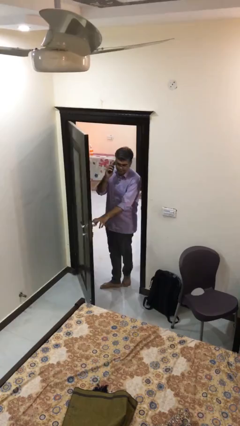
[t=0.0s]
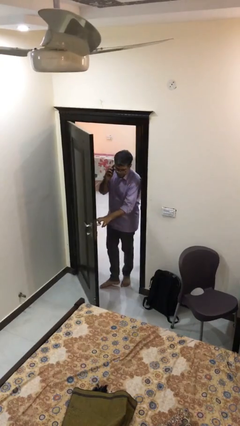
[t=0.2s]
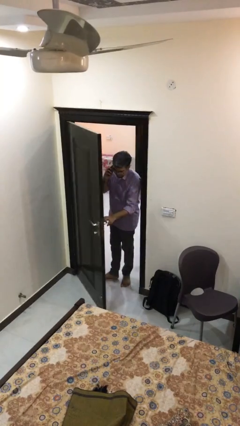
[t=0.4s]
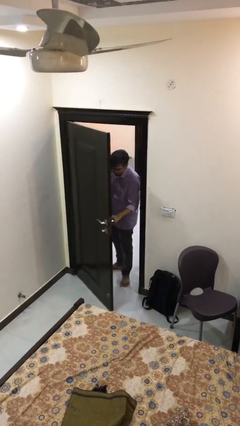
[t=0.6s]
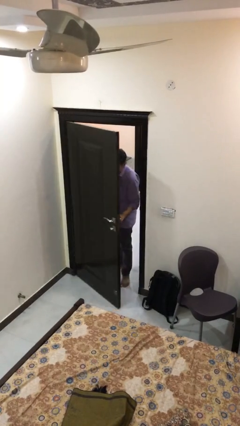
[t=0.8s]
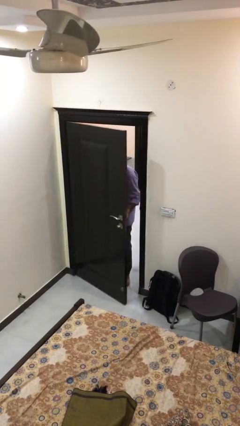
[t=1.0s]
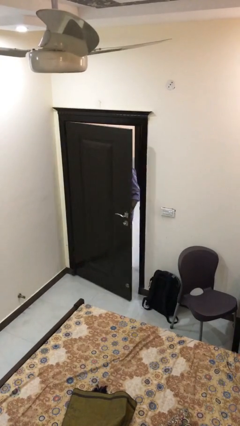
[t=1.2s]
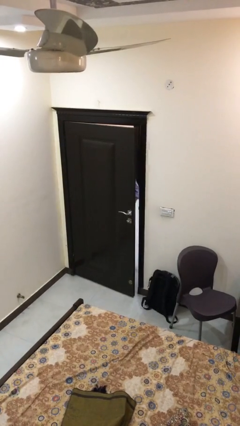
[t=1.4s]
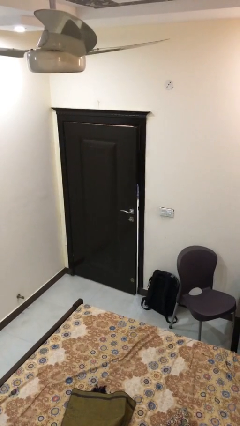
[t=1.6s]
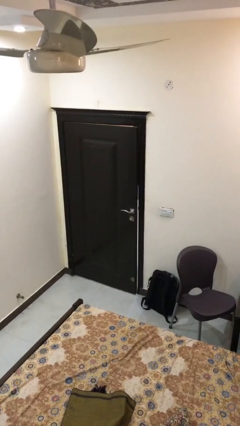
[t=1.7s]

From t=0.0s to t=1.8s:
person closes facility door

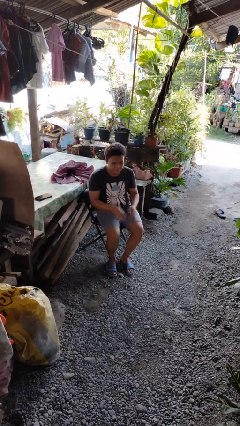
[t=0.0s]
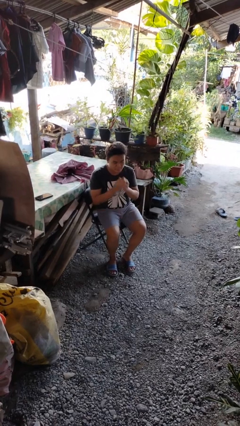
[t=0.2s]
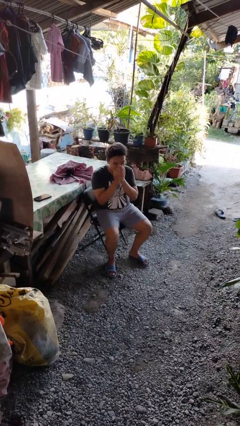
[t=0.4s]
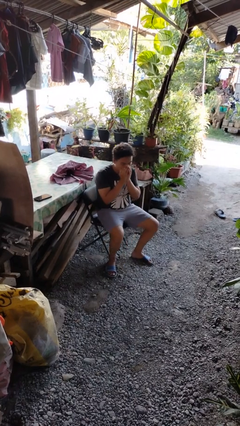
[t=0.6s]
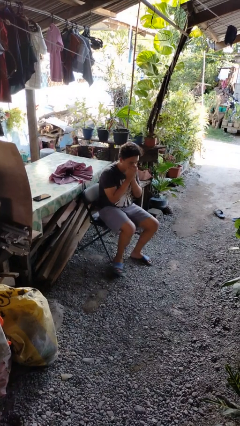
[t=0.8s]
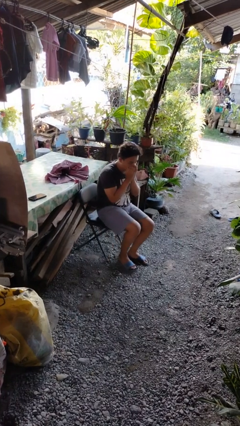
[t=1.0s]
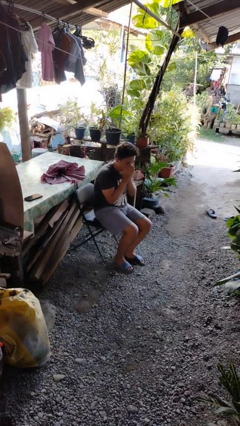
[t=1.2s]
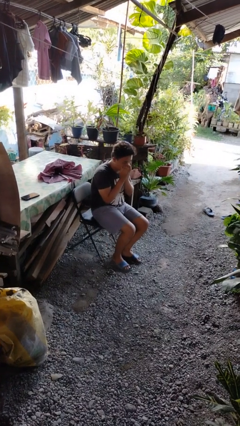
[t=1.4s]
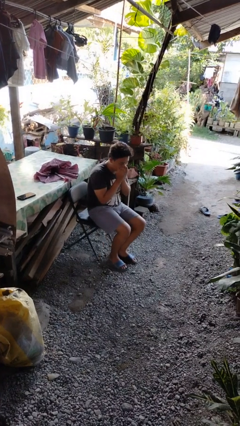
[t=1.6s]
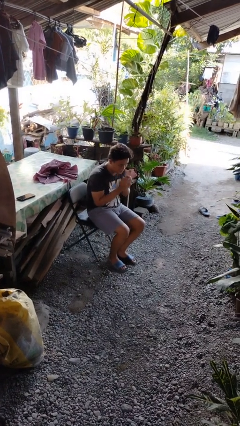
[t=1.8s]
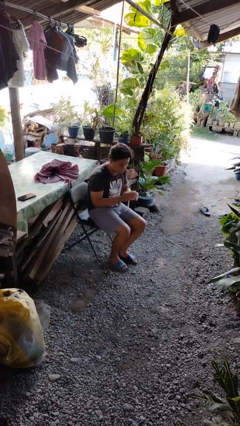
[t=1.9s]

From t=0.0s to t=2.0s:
person blows into hands

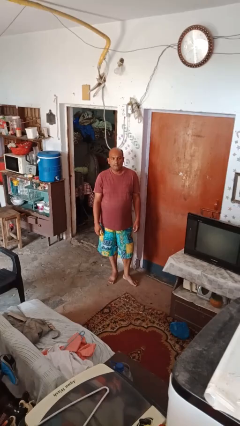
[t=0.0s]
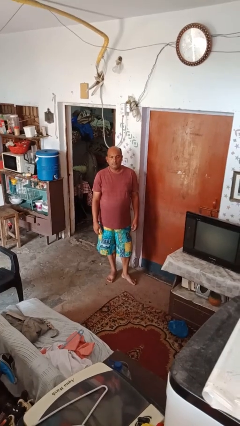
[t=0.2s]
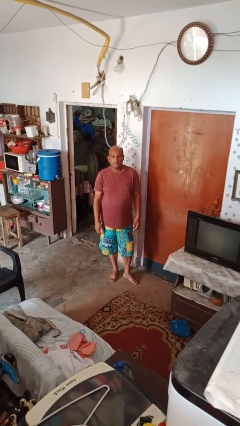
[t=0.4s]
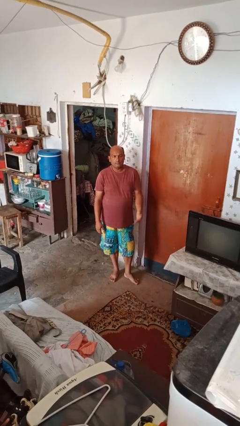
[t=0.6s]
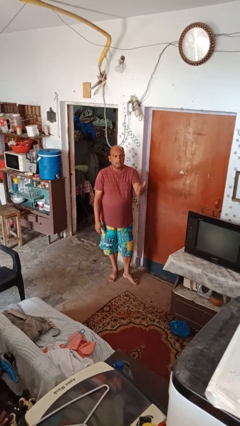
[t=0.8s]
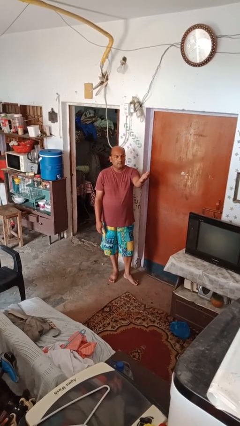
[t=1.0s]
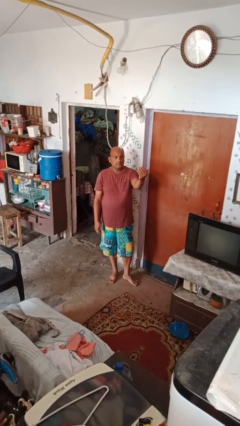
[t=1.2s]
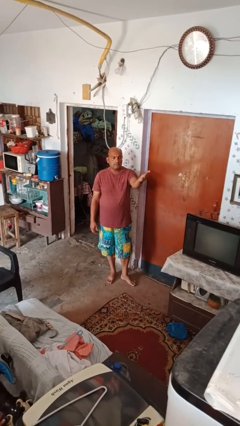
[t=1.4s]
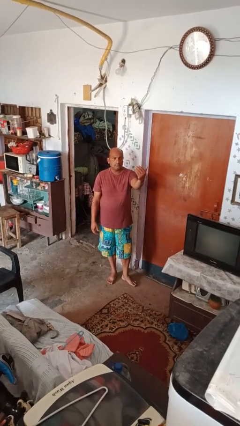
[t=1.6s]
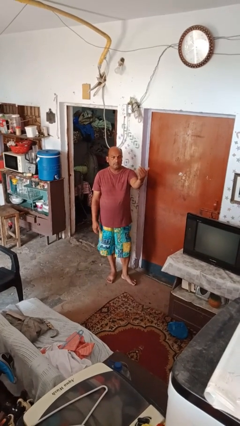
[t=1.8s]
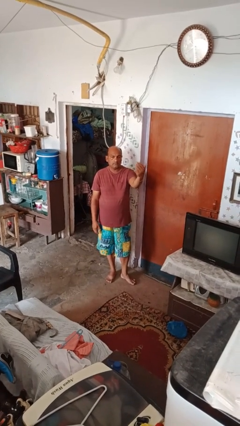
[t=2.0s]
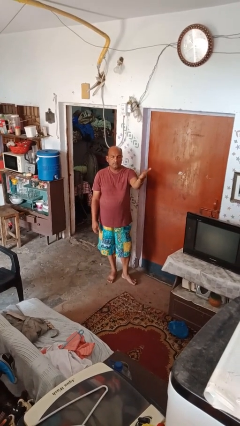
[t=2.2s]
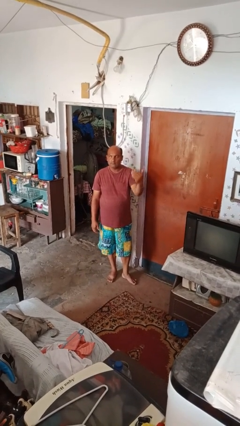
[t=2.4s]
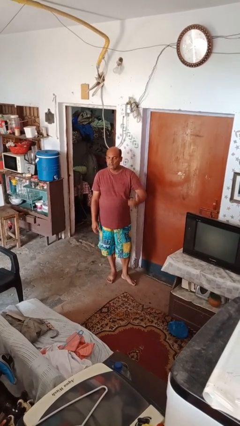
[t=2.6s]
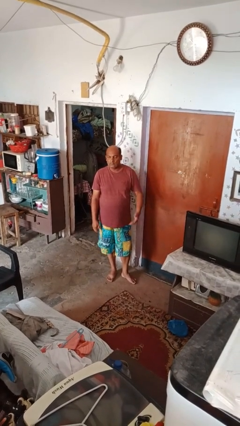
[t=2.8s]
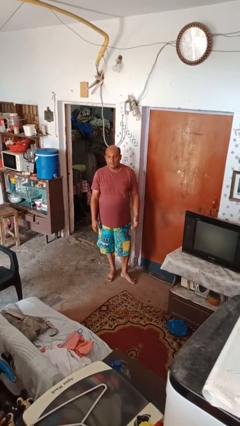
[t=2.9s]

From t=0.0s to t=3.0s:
person gestures come here

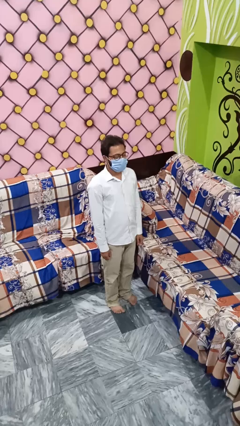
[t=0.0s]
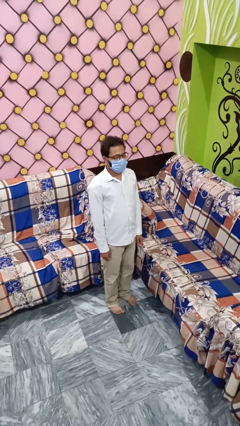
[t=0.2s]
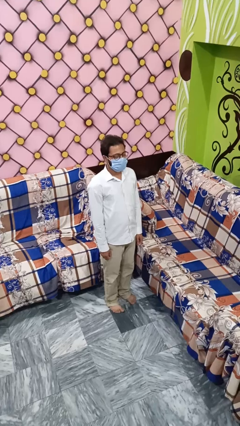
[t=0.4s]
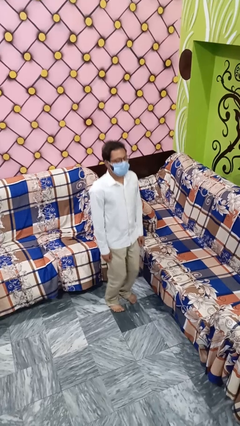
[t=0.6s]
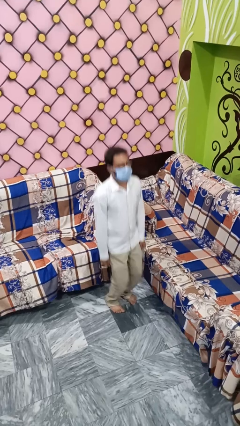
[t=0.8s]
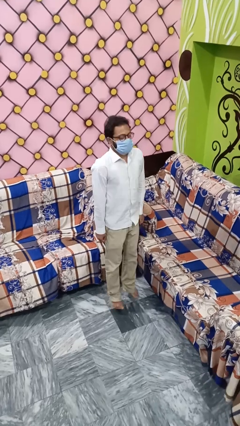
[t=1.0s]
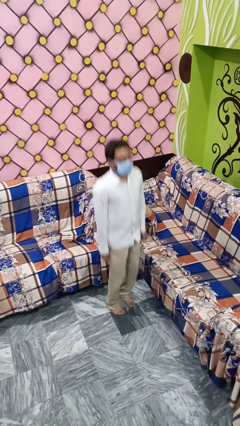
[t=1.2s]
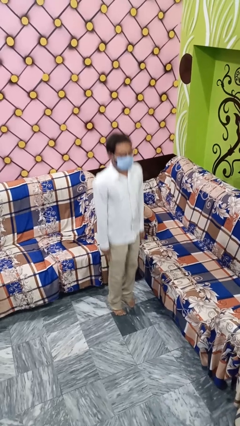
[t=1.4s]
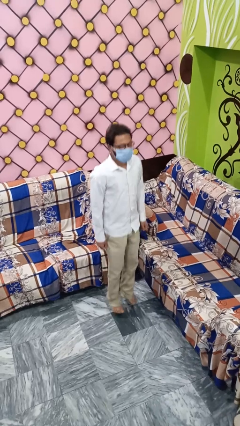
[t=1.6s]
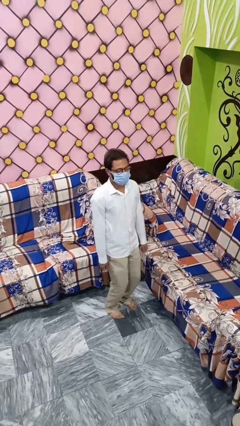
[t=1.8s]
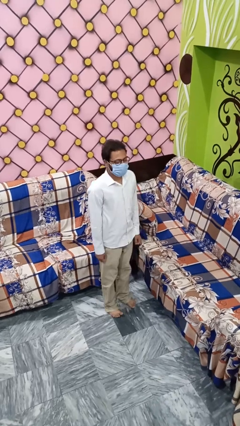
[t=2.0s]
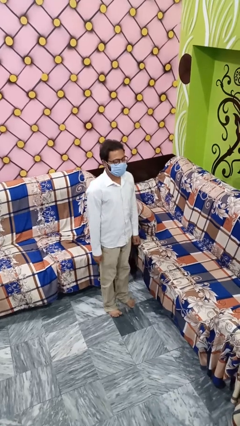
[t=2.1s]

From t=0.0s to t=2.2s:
person jumps

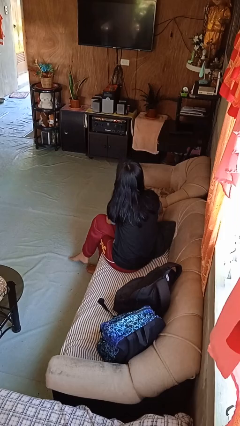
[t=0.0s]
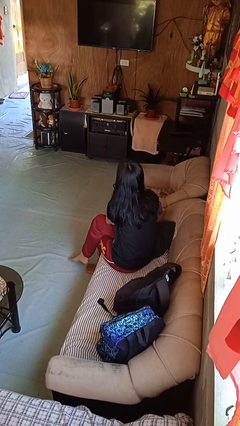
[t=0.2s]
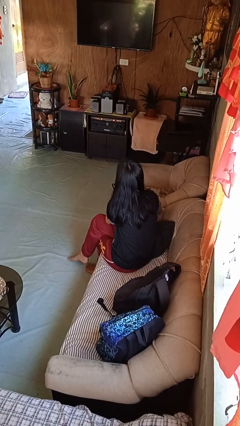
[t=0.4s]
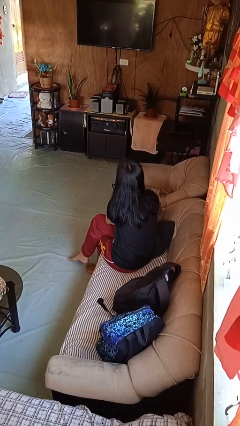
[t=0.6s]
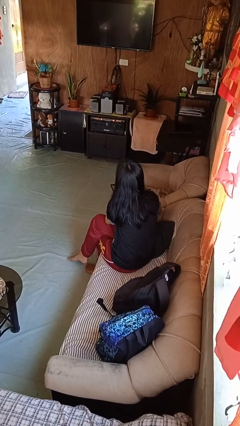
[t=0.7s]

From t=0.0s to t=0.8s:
person uses television remote

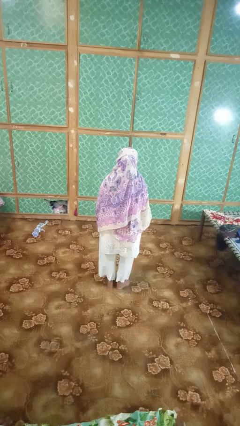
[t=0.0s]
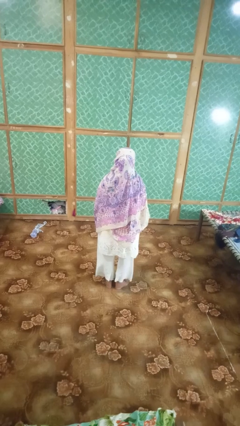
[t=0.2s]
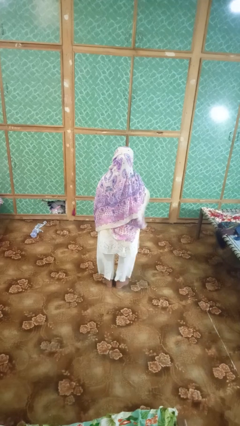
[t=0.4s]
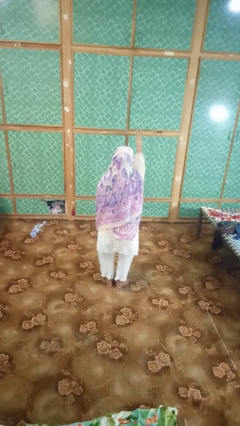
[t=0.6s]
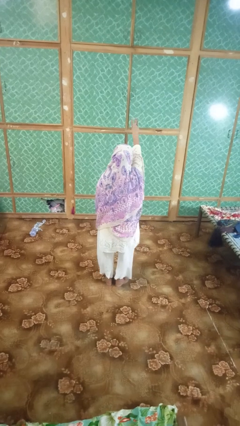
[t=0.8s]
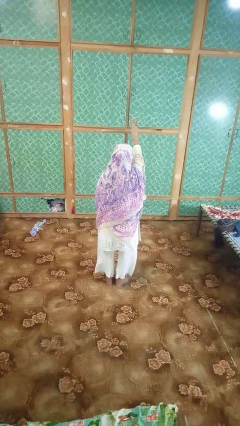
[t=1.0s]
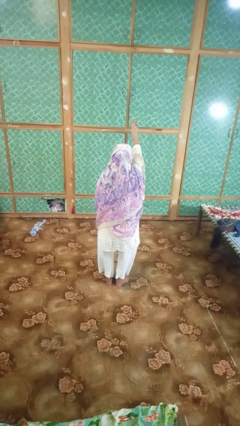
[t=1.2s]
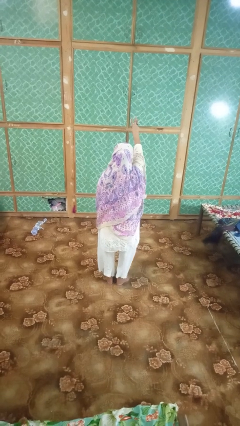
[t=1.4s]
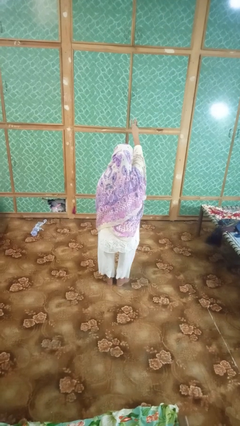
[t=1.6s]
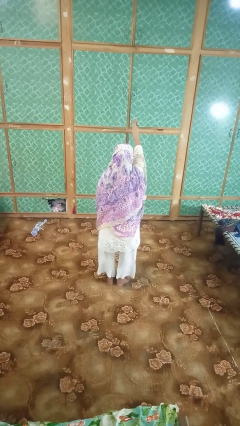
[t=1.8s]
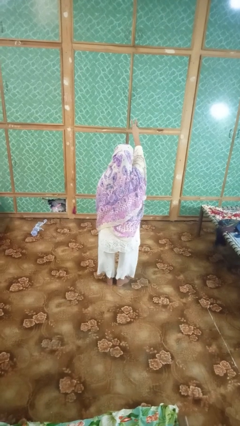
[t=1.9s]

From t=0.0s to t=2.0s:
person gestures number three

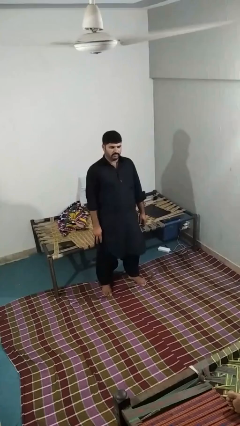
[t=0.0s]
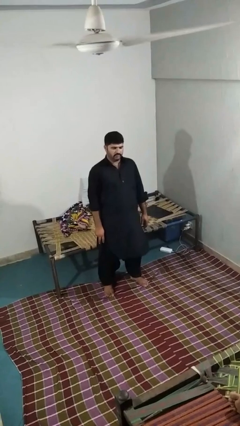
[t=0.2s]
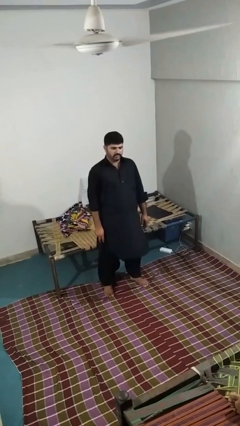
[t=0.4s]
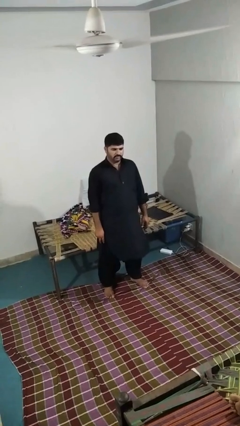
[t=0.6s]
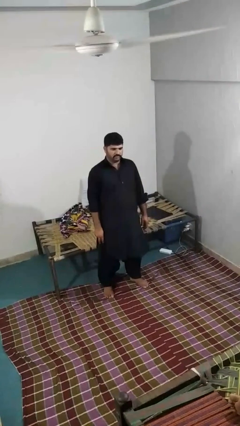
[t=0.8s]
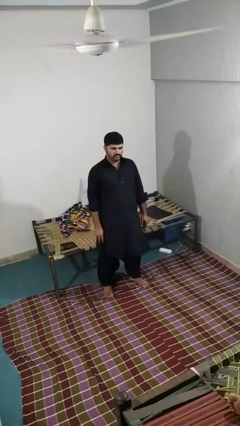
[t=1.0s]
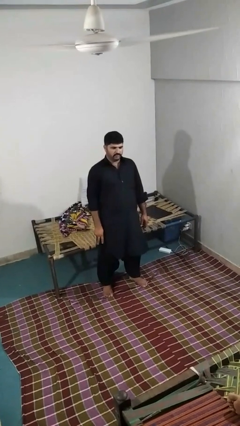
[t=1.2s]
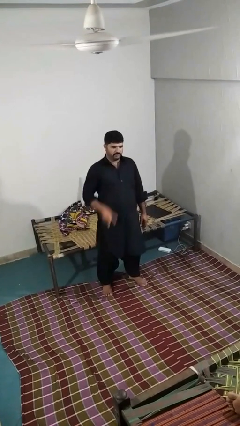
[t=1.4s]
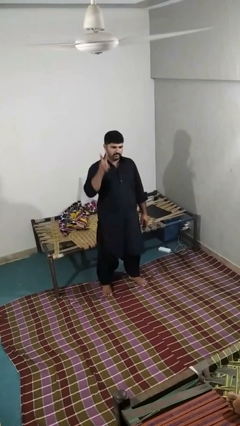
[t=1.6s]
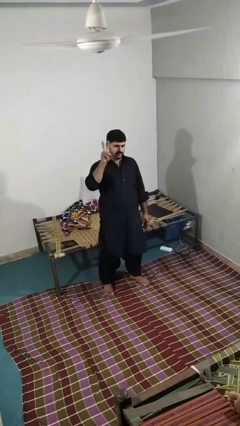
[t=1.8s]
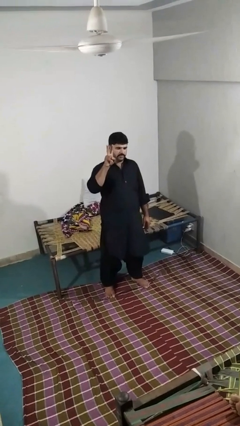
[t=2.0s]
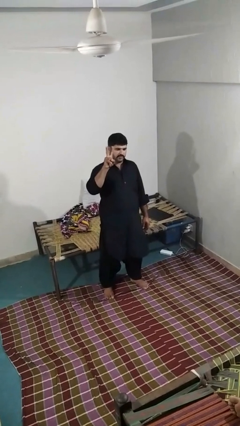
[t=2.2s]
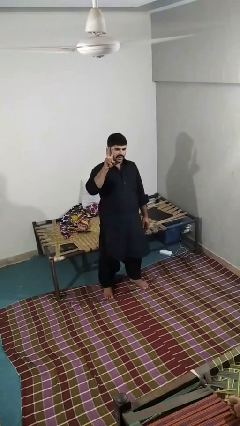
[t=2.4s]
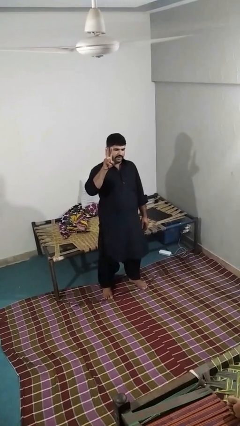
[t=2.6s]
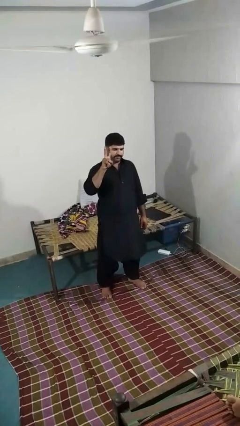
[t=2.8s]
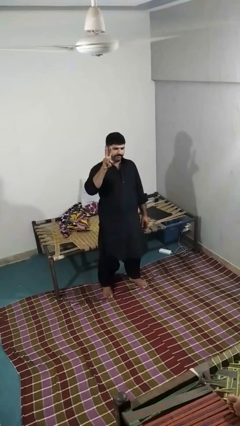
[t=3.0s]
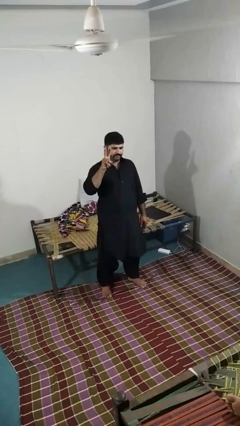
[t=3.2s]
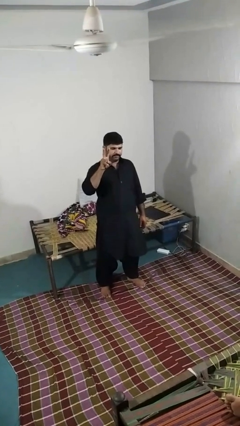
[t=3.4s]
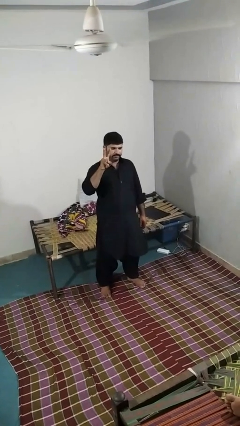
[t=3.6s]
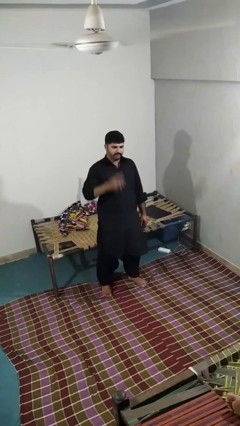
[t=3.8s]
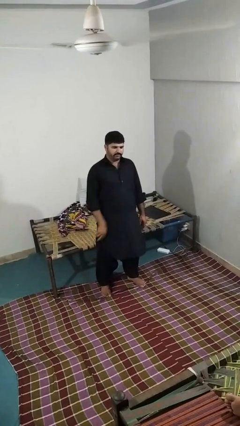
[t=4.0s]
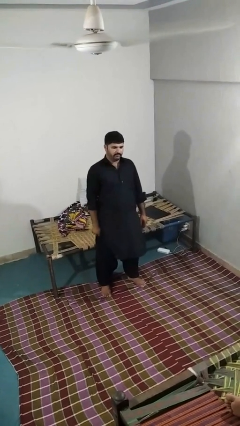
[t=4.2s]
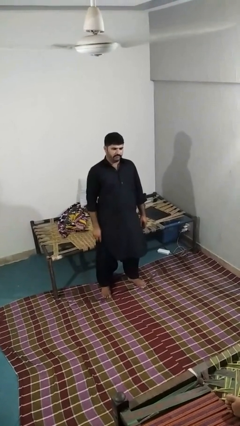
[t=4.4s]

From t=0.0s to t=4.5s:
person gestures peace

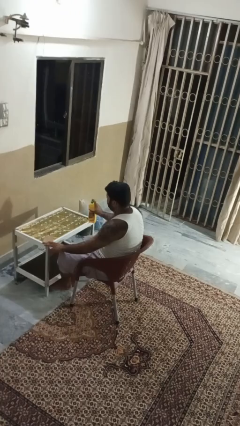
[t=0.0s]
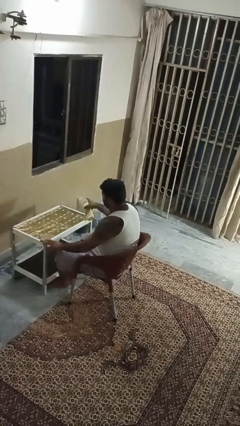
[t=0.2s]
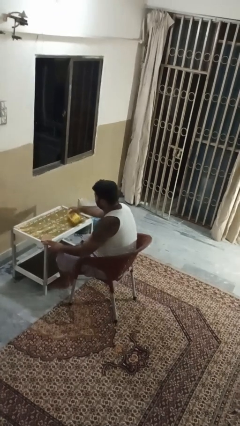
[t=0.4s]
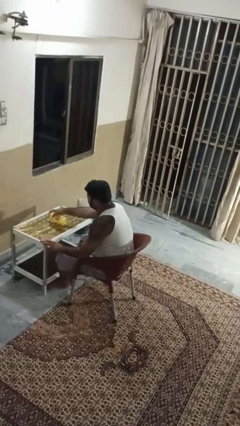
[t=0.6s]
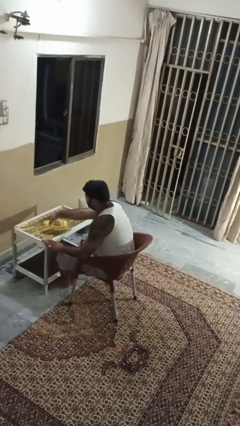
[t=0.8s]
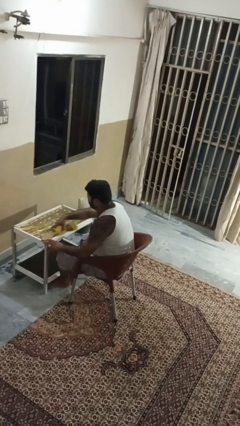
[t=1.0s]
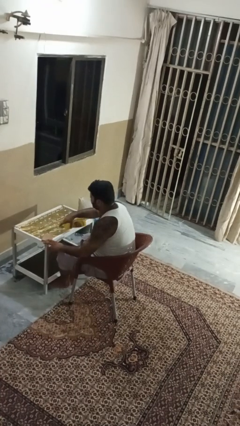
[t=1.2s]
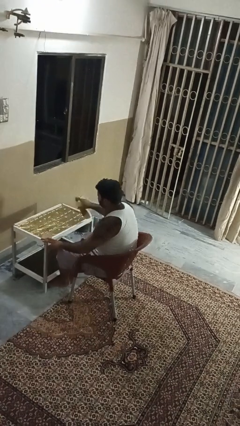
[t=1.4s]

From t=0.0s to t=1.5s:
person sprays from bottle
